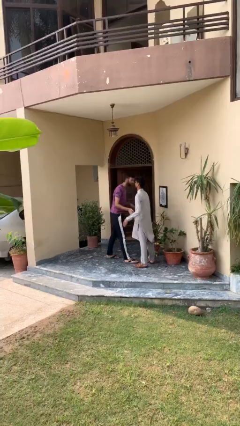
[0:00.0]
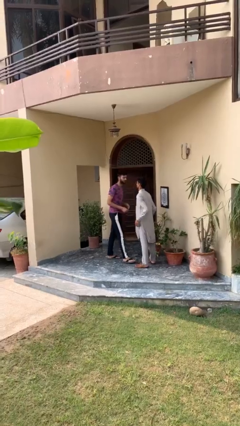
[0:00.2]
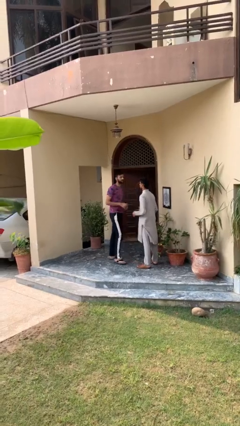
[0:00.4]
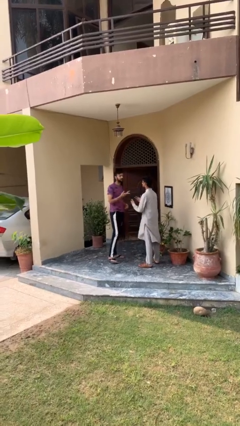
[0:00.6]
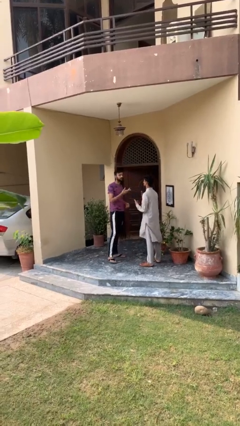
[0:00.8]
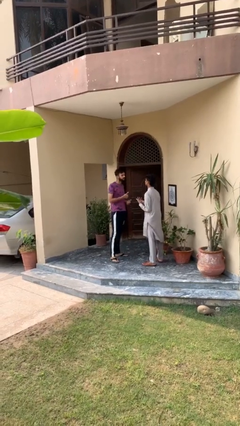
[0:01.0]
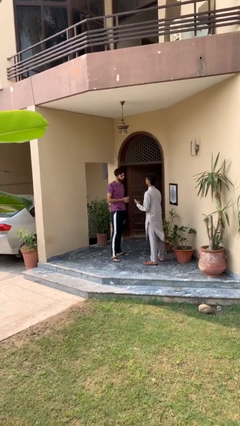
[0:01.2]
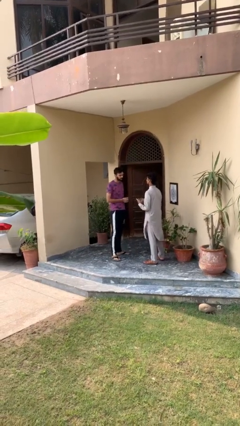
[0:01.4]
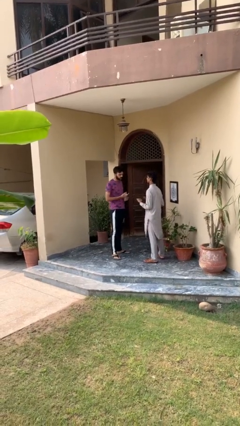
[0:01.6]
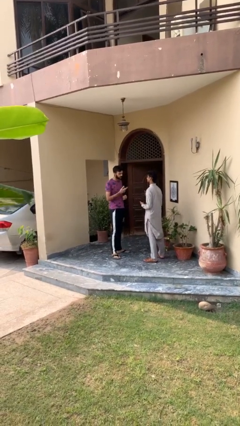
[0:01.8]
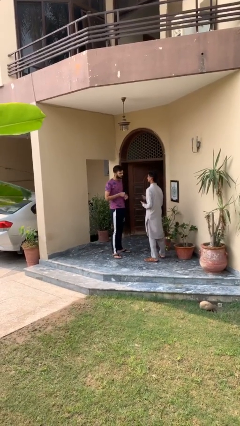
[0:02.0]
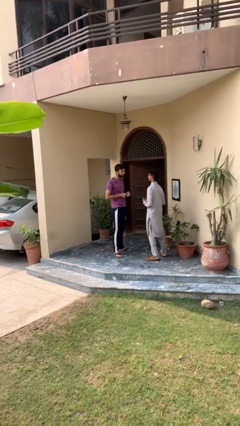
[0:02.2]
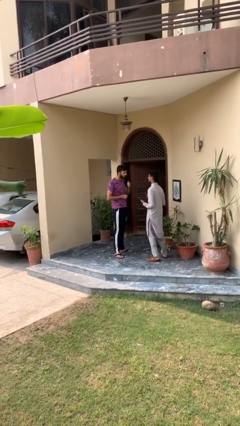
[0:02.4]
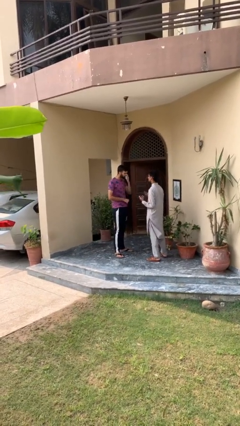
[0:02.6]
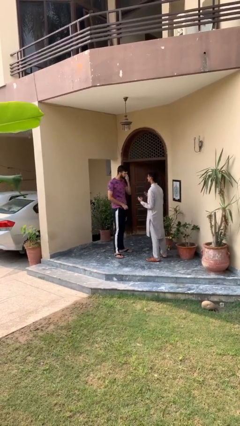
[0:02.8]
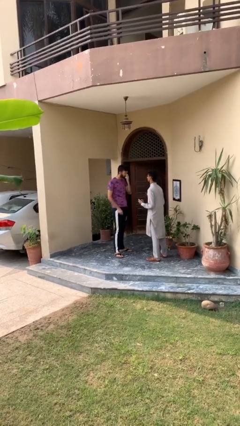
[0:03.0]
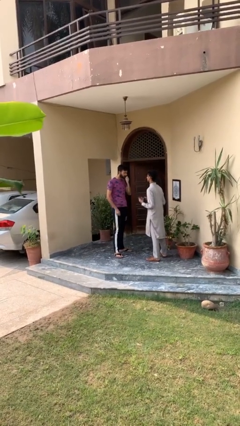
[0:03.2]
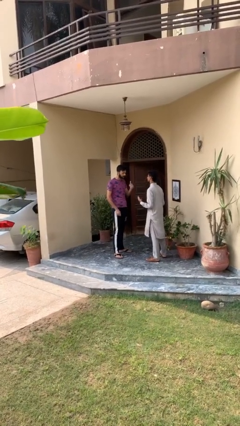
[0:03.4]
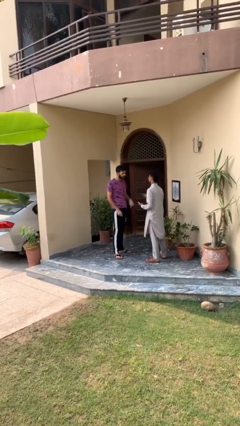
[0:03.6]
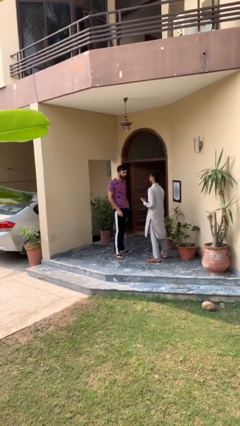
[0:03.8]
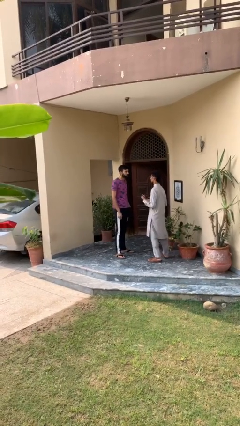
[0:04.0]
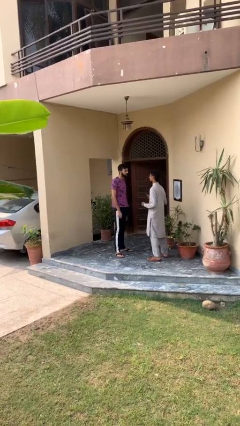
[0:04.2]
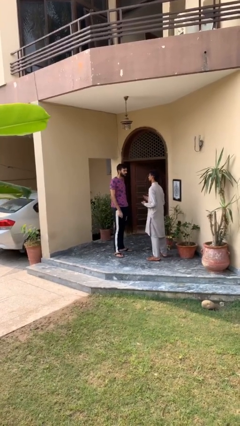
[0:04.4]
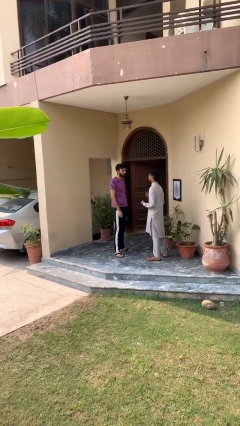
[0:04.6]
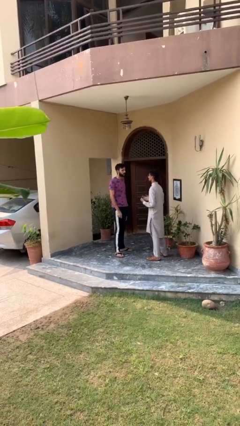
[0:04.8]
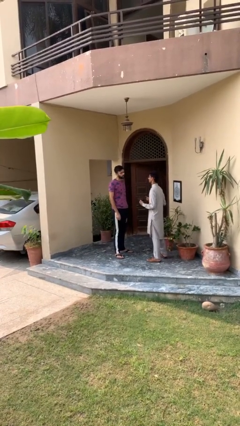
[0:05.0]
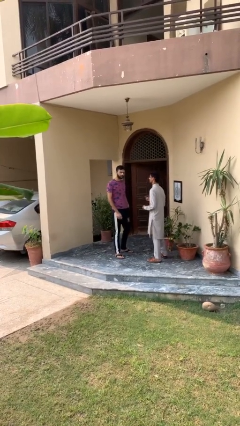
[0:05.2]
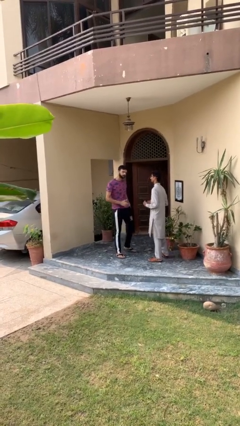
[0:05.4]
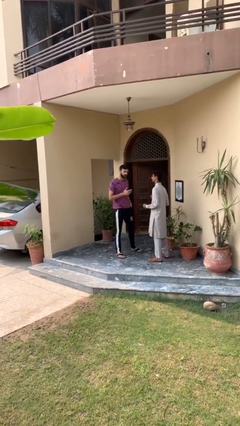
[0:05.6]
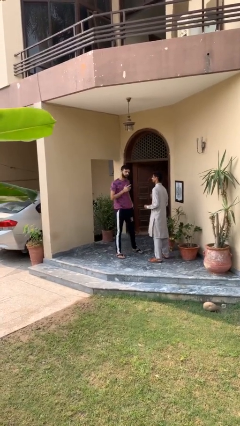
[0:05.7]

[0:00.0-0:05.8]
person talks to person

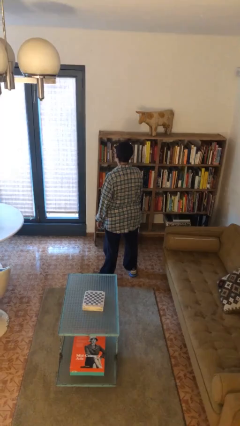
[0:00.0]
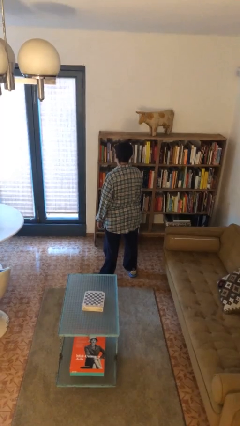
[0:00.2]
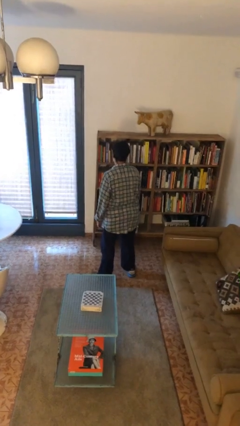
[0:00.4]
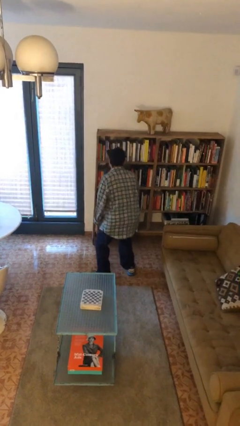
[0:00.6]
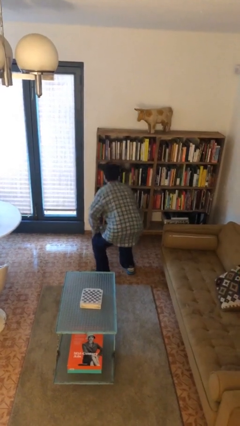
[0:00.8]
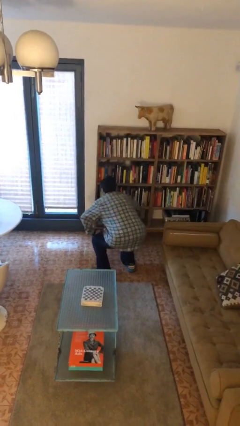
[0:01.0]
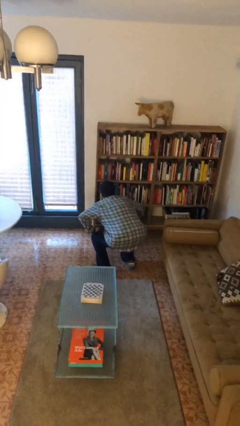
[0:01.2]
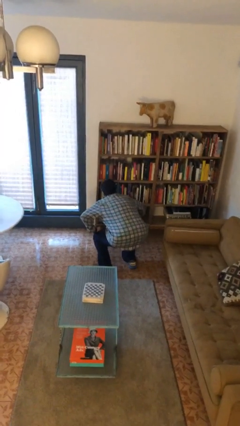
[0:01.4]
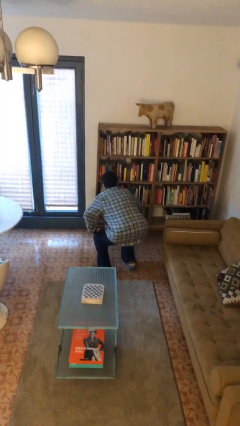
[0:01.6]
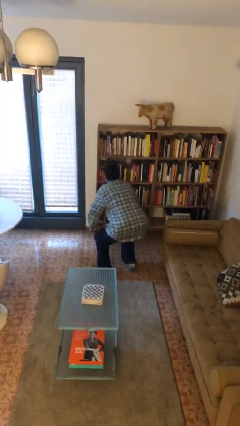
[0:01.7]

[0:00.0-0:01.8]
person squats

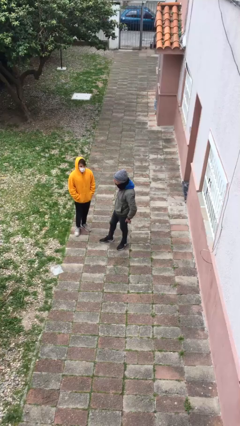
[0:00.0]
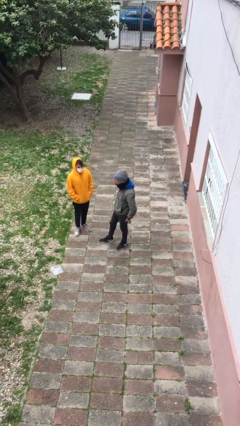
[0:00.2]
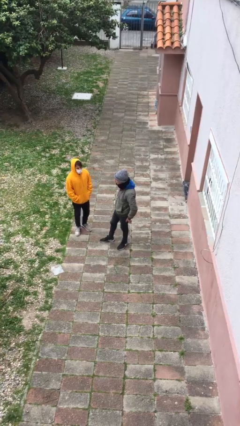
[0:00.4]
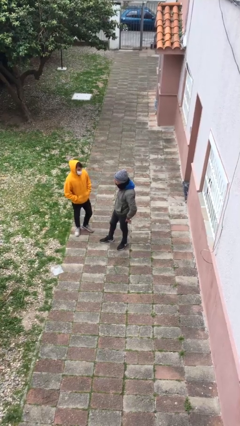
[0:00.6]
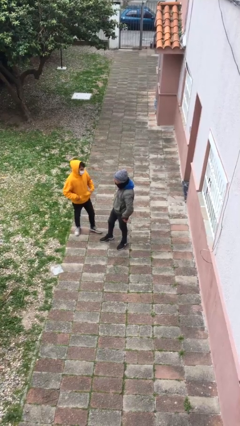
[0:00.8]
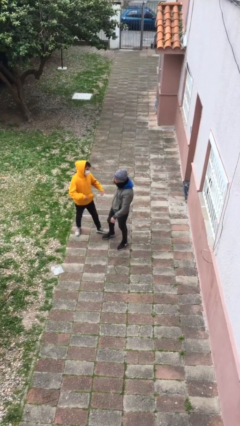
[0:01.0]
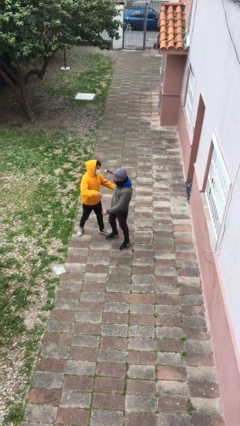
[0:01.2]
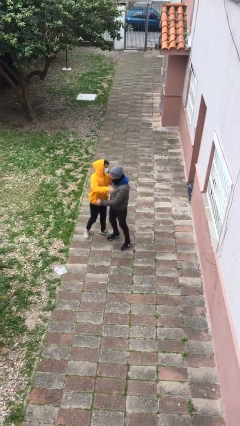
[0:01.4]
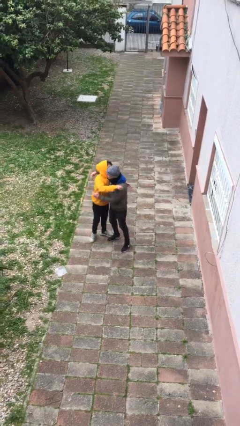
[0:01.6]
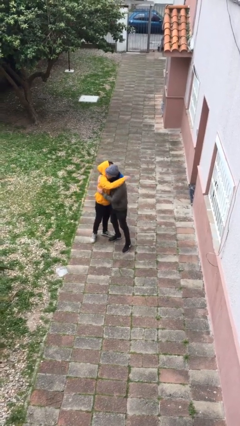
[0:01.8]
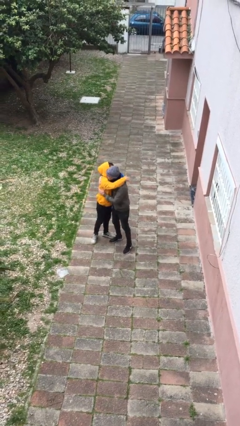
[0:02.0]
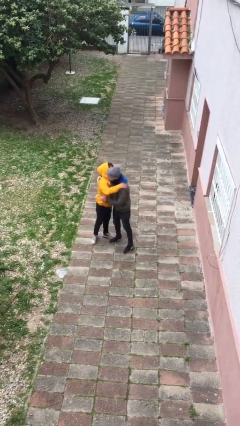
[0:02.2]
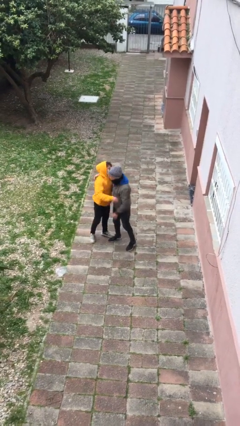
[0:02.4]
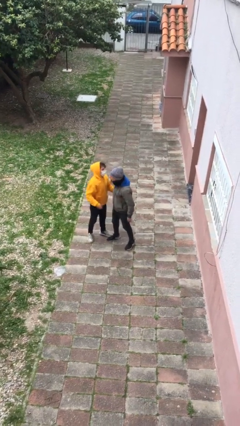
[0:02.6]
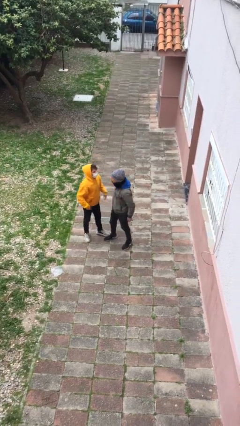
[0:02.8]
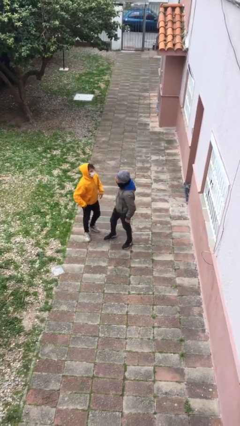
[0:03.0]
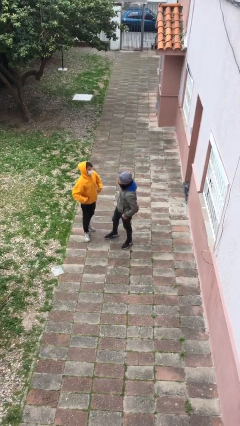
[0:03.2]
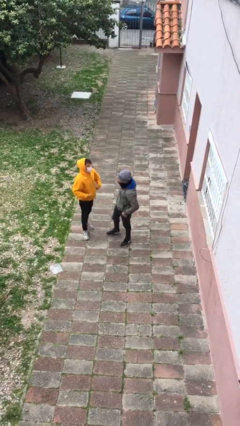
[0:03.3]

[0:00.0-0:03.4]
person embraces person

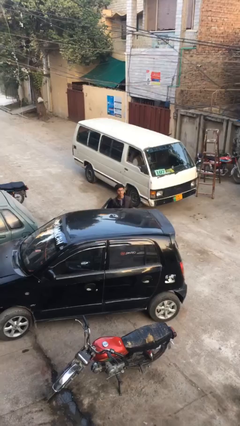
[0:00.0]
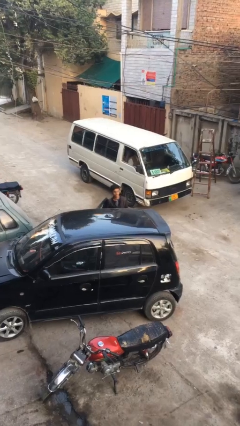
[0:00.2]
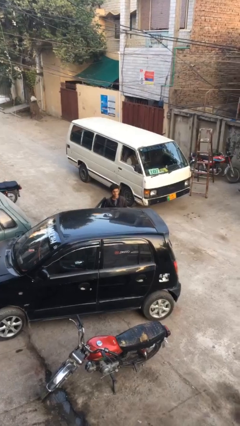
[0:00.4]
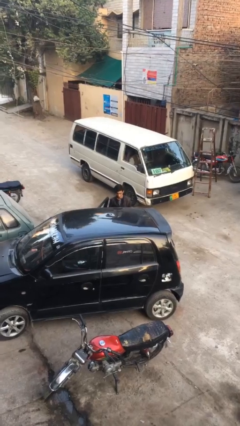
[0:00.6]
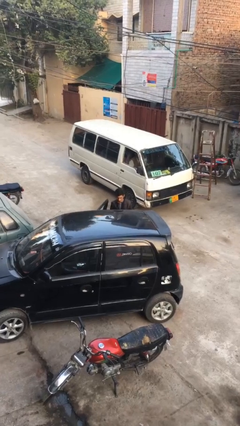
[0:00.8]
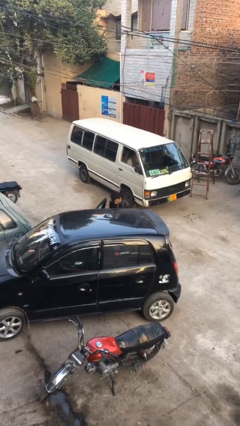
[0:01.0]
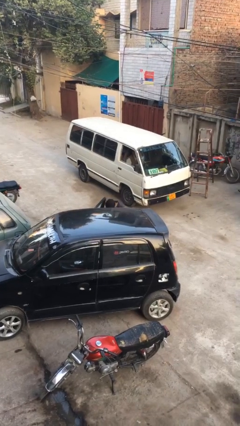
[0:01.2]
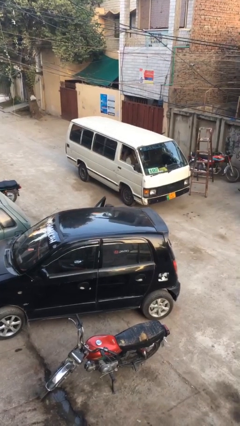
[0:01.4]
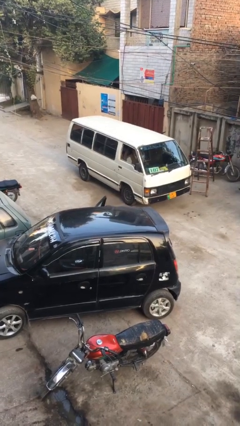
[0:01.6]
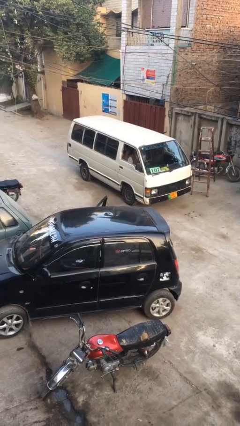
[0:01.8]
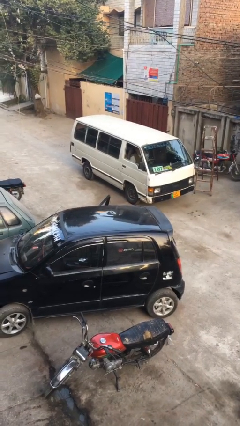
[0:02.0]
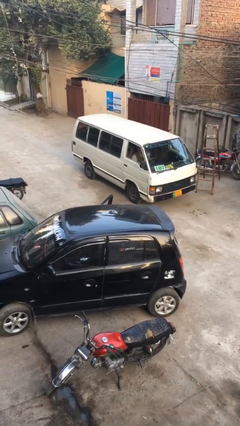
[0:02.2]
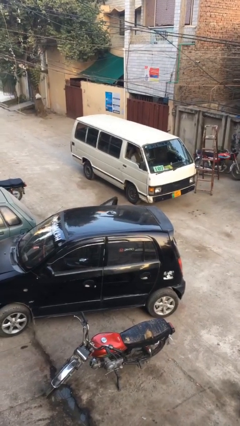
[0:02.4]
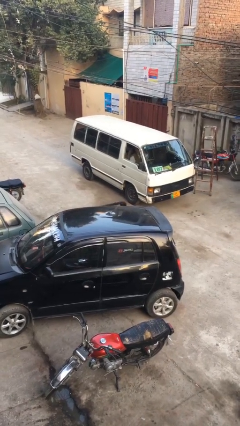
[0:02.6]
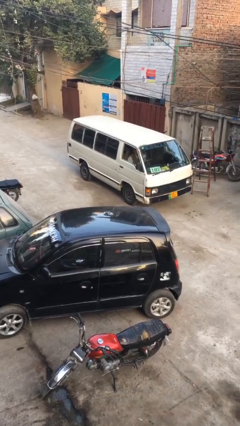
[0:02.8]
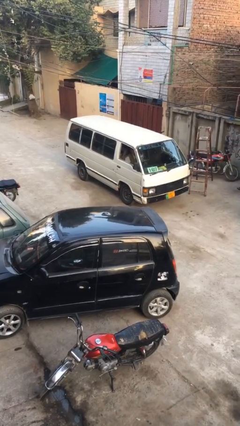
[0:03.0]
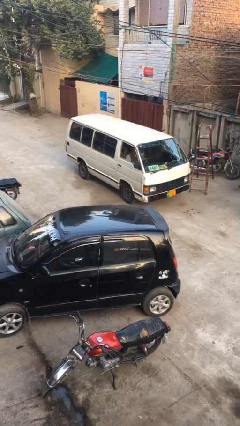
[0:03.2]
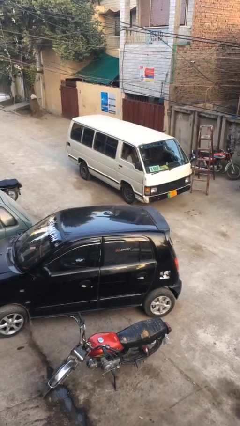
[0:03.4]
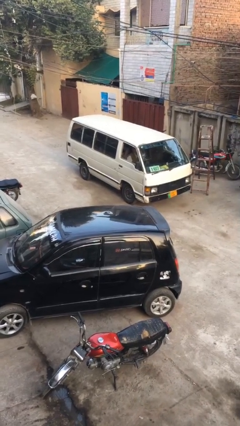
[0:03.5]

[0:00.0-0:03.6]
person enters car

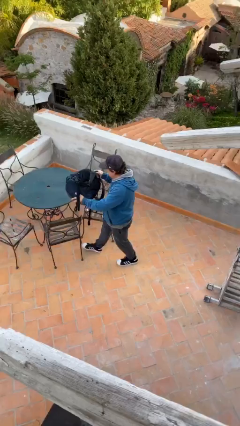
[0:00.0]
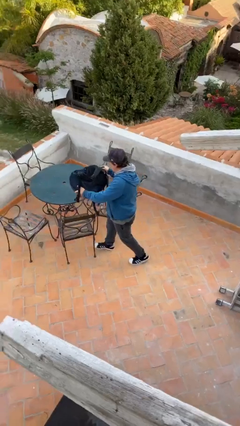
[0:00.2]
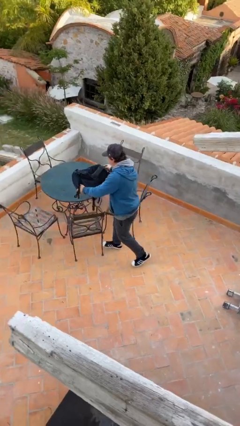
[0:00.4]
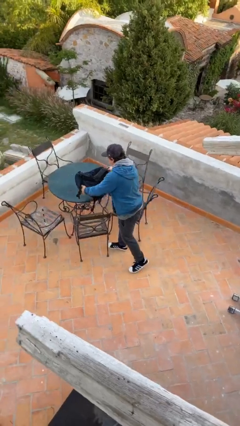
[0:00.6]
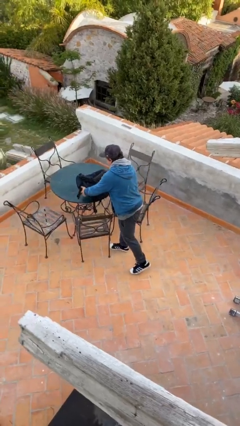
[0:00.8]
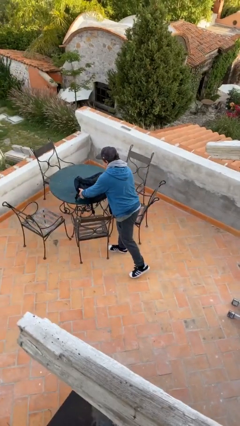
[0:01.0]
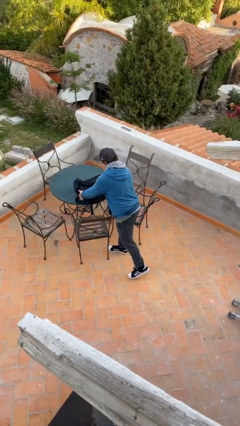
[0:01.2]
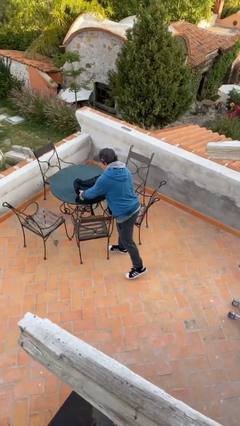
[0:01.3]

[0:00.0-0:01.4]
person puts down object on table

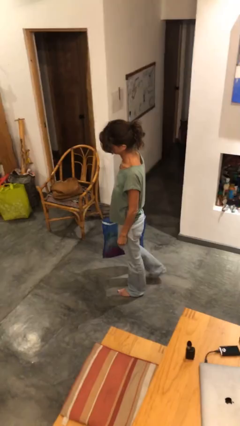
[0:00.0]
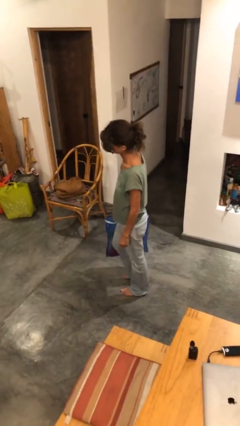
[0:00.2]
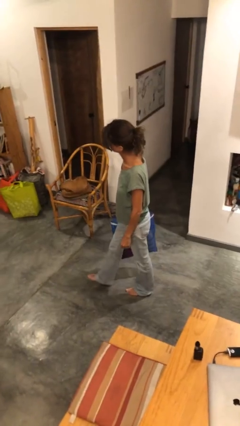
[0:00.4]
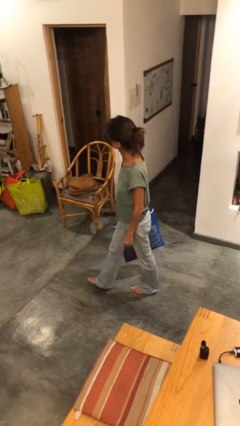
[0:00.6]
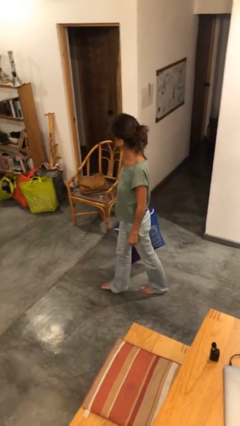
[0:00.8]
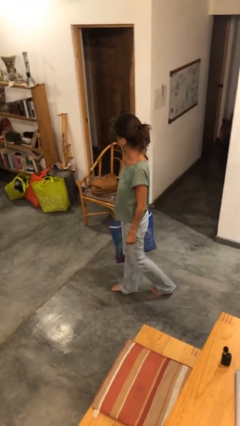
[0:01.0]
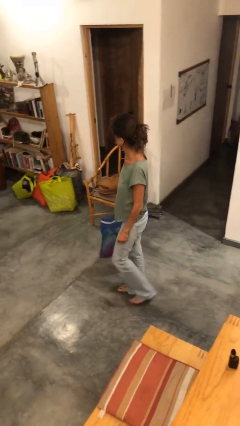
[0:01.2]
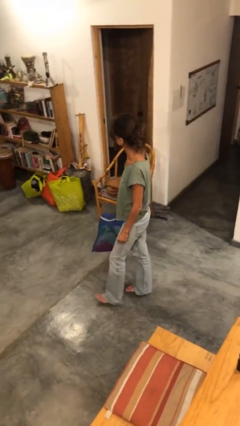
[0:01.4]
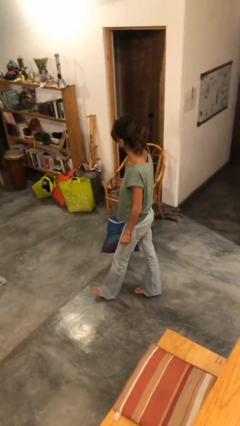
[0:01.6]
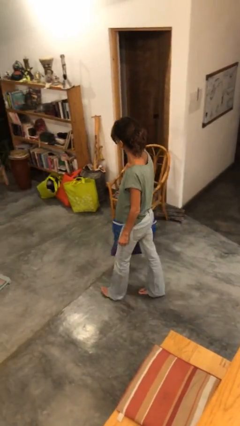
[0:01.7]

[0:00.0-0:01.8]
person carries groceries
